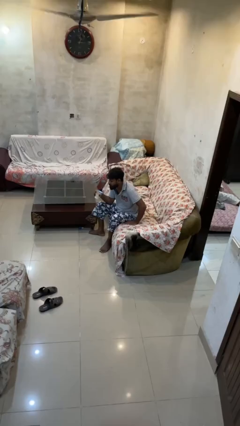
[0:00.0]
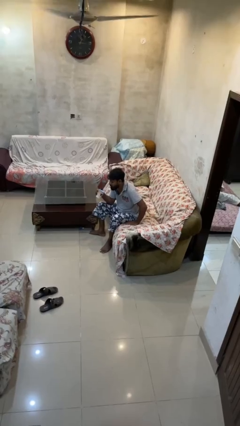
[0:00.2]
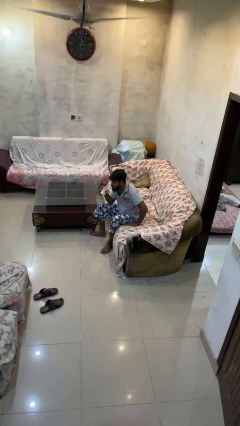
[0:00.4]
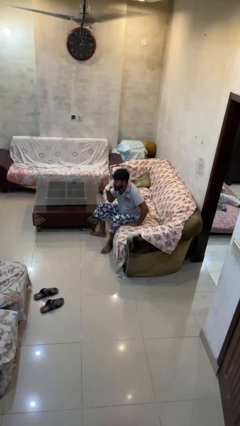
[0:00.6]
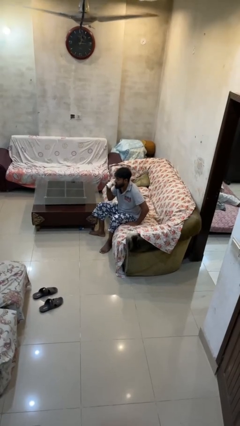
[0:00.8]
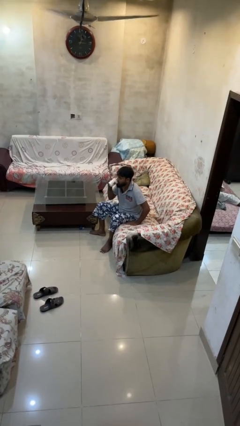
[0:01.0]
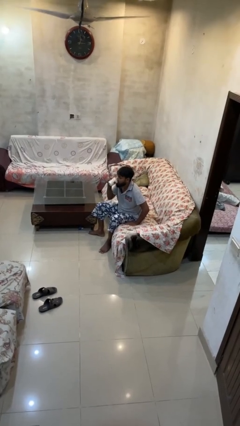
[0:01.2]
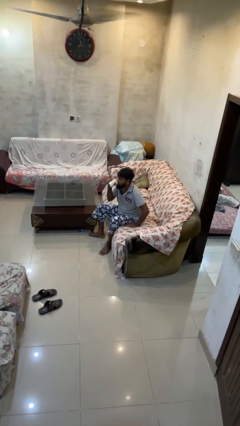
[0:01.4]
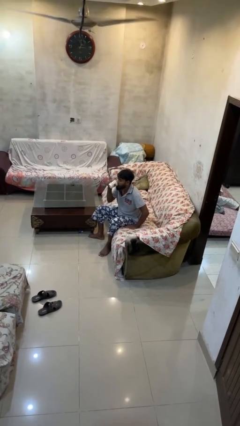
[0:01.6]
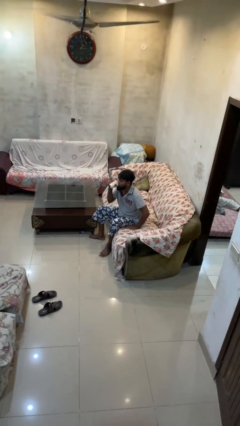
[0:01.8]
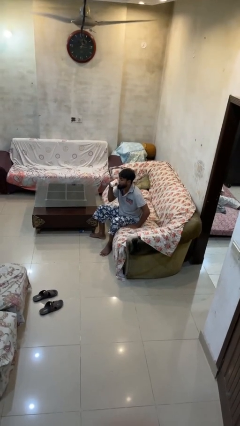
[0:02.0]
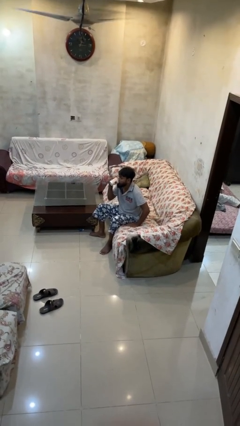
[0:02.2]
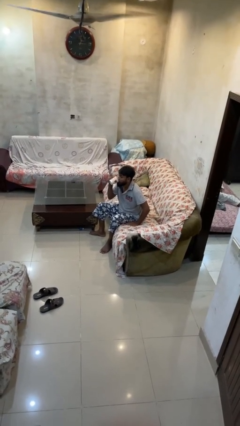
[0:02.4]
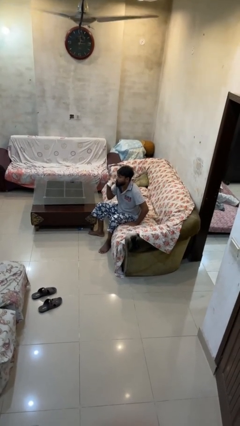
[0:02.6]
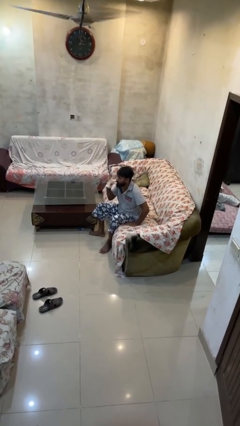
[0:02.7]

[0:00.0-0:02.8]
person drinks from mug

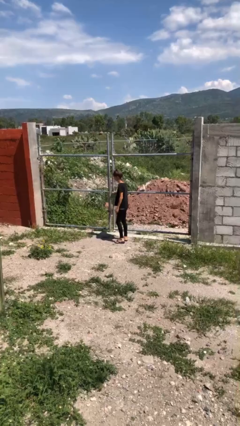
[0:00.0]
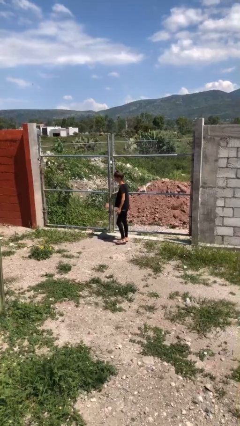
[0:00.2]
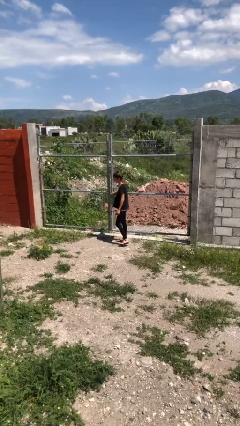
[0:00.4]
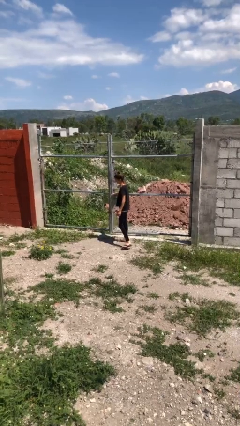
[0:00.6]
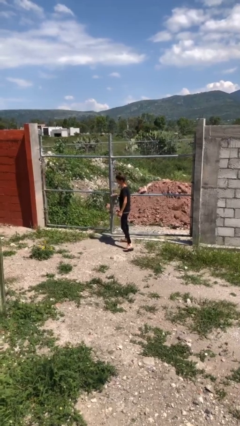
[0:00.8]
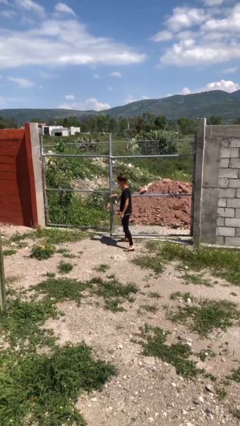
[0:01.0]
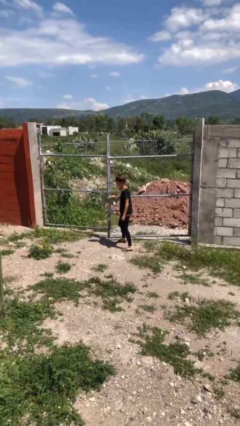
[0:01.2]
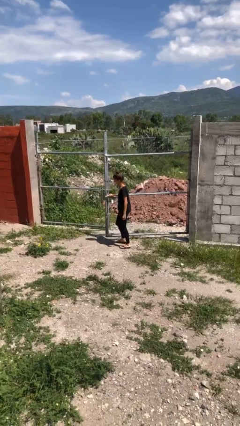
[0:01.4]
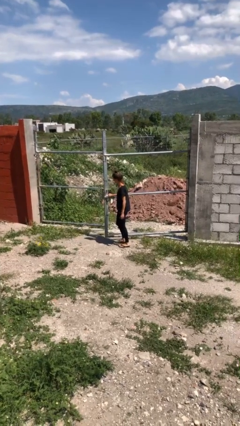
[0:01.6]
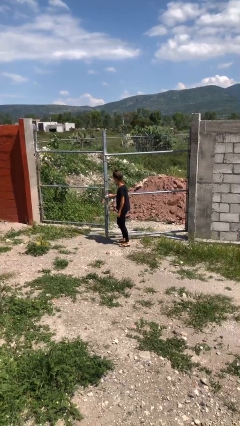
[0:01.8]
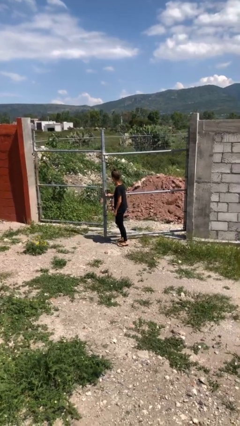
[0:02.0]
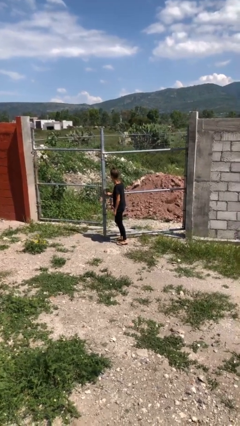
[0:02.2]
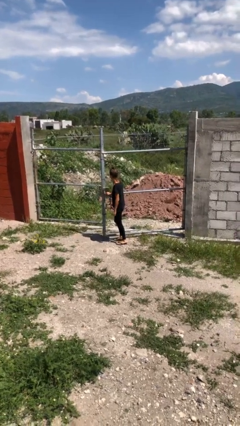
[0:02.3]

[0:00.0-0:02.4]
person opens gate

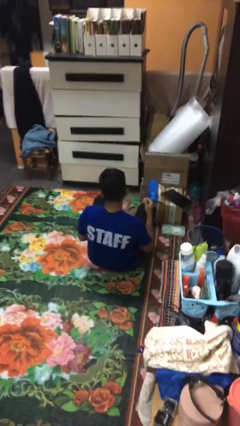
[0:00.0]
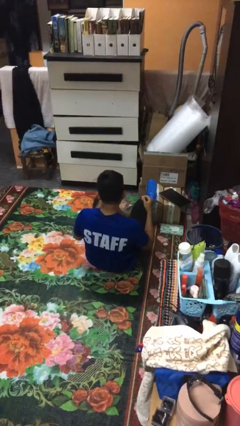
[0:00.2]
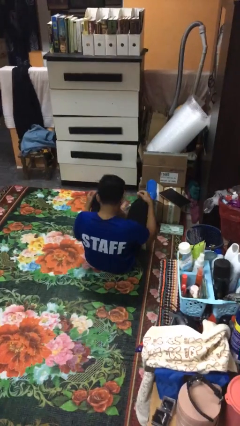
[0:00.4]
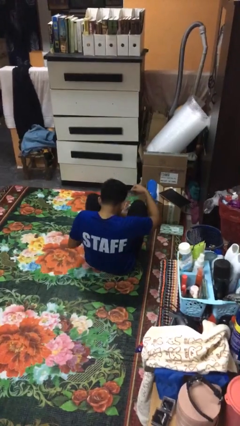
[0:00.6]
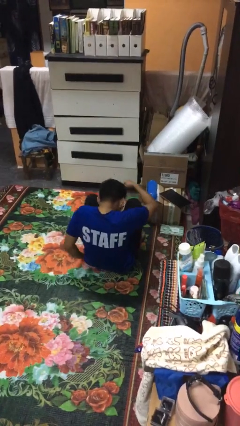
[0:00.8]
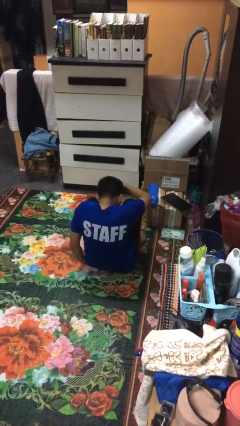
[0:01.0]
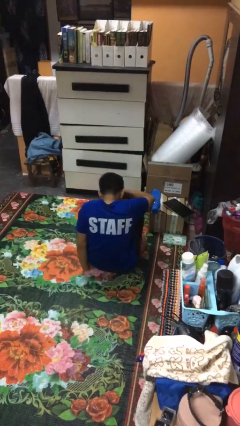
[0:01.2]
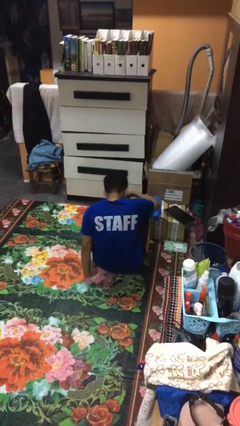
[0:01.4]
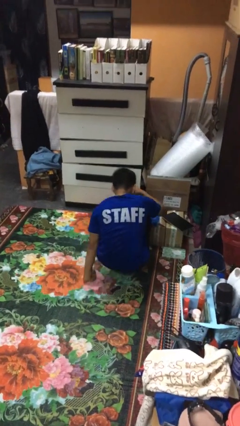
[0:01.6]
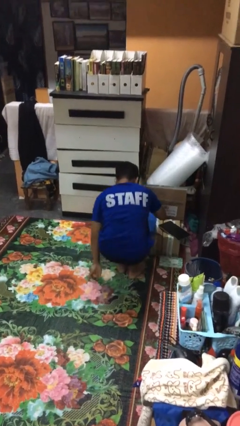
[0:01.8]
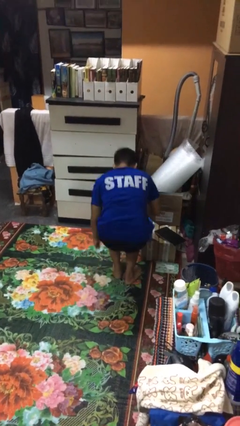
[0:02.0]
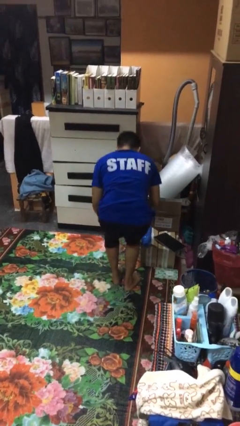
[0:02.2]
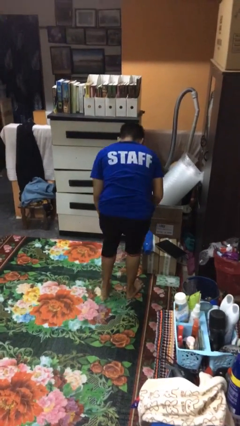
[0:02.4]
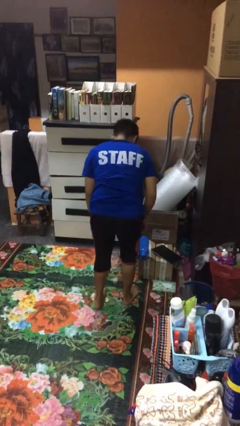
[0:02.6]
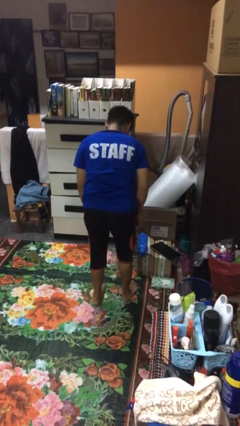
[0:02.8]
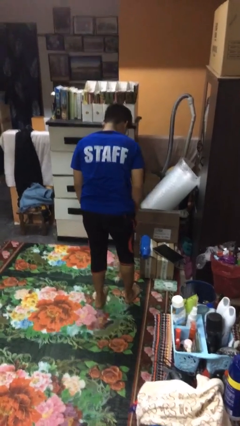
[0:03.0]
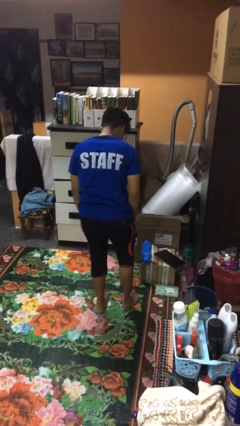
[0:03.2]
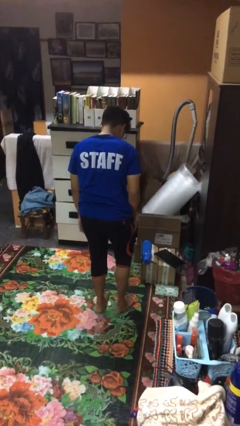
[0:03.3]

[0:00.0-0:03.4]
person stands up from floor

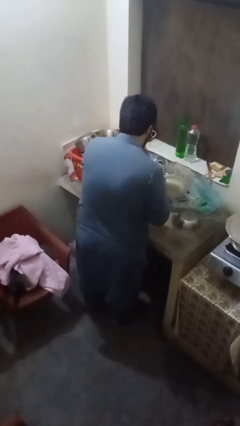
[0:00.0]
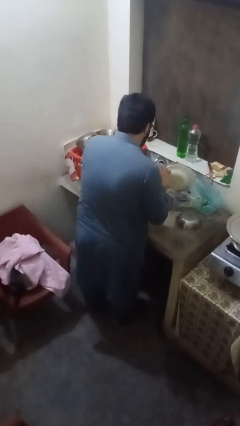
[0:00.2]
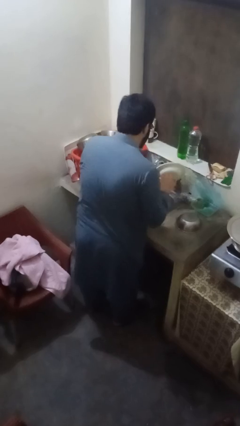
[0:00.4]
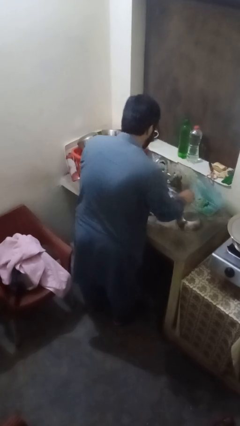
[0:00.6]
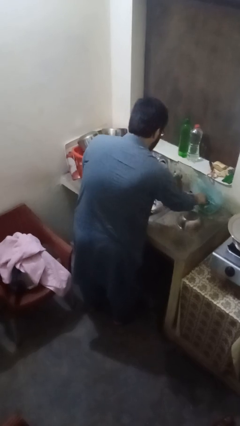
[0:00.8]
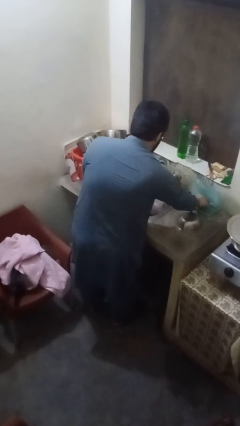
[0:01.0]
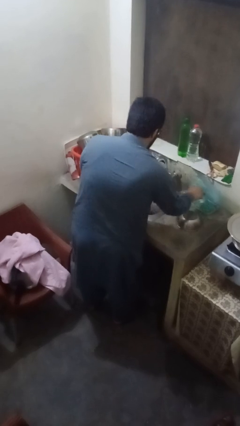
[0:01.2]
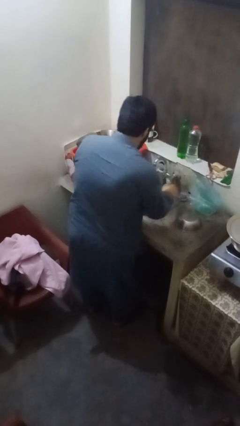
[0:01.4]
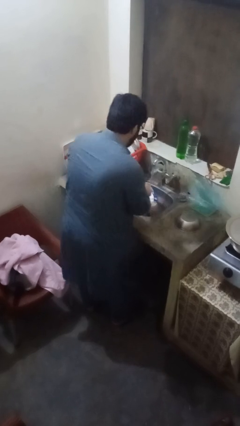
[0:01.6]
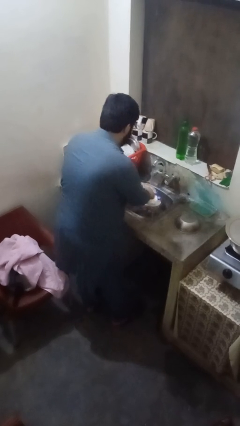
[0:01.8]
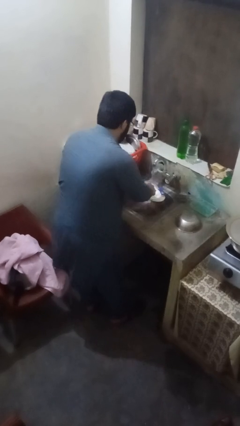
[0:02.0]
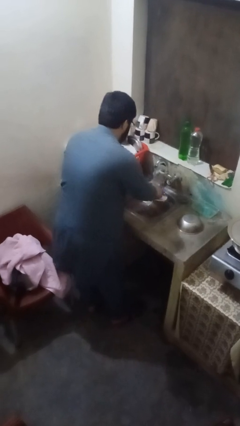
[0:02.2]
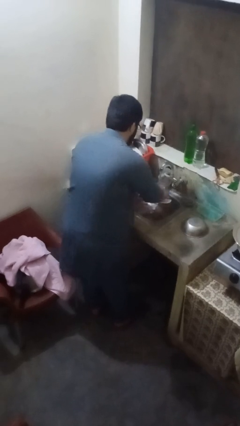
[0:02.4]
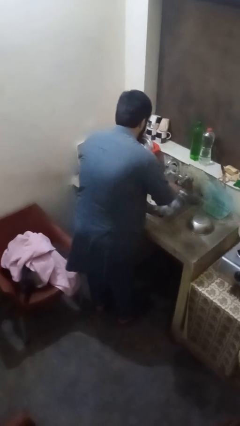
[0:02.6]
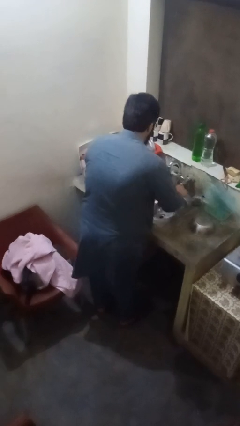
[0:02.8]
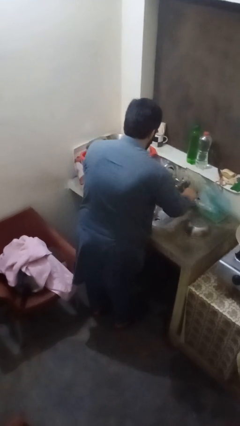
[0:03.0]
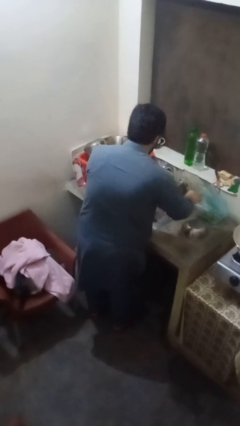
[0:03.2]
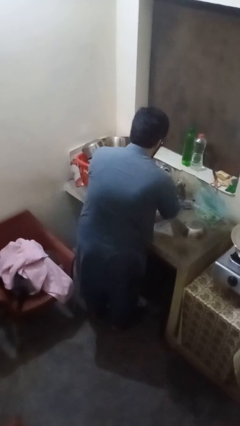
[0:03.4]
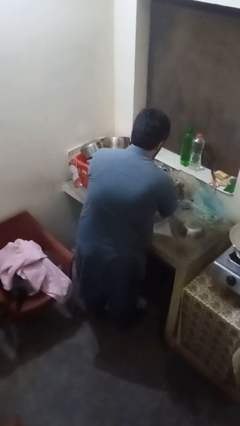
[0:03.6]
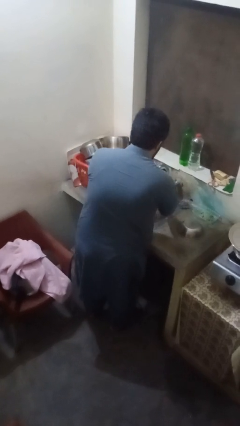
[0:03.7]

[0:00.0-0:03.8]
person washes dish

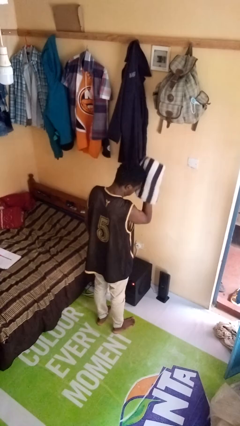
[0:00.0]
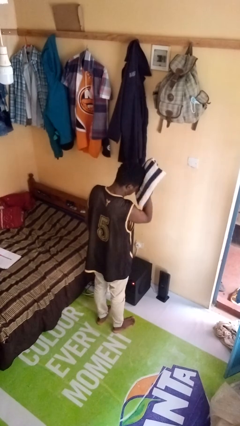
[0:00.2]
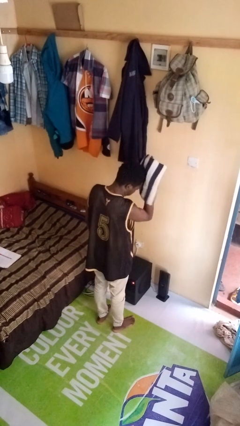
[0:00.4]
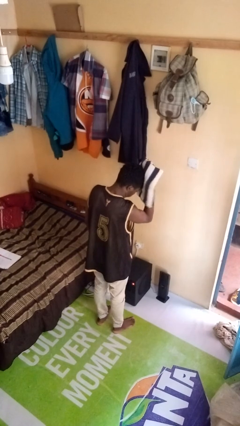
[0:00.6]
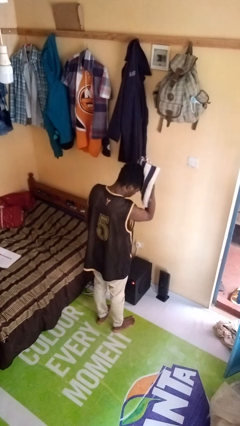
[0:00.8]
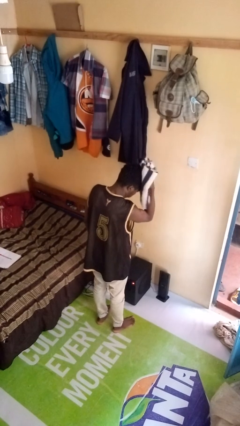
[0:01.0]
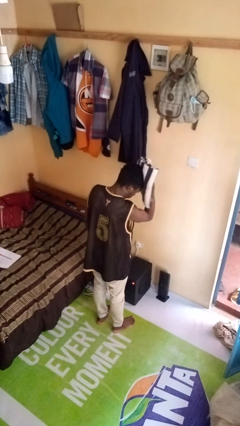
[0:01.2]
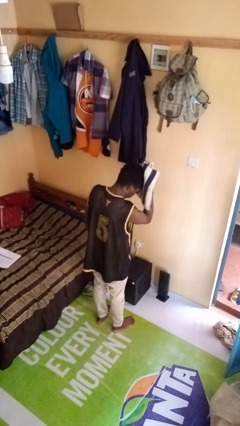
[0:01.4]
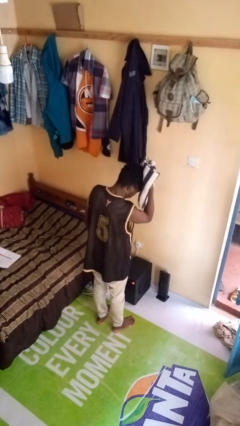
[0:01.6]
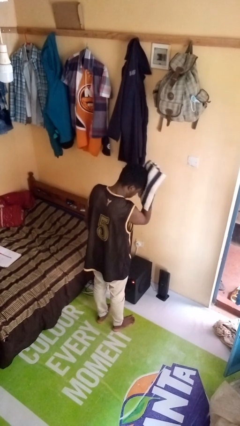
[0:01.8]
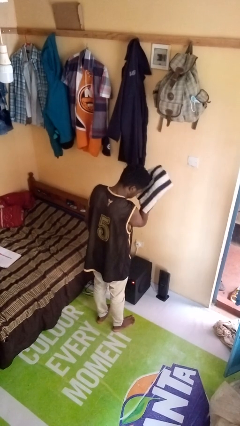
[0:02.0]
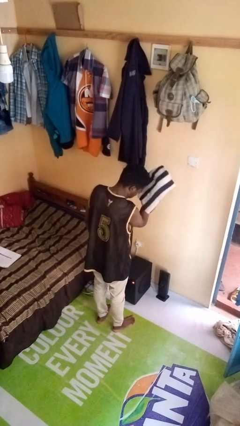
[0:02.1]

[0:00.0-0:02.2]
person dries hair with towel

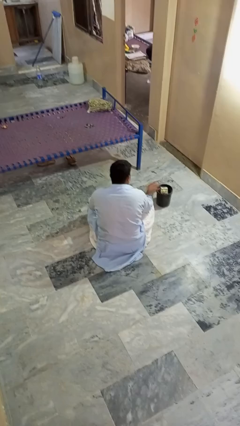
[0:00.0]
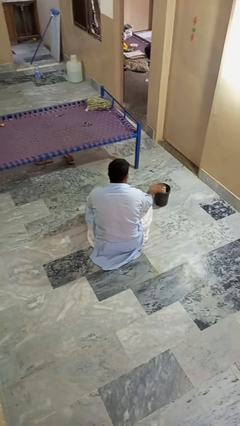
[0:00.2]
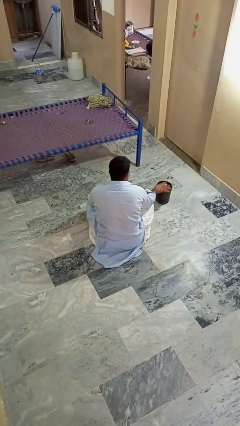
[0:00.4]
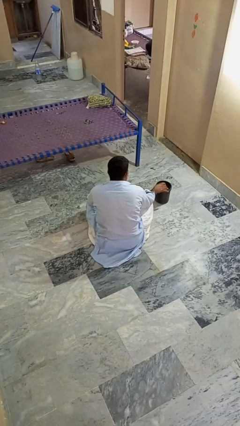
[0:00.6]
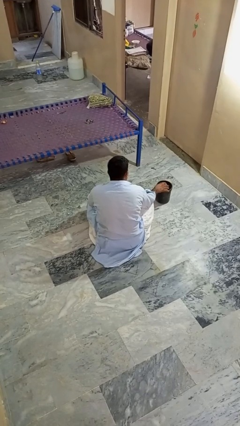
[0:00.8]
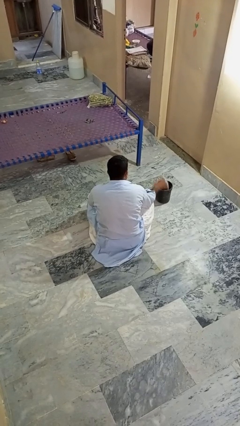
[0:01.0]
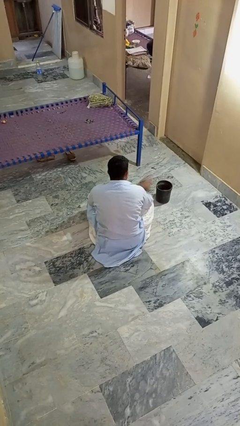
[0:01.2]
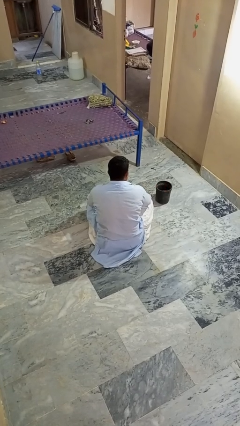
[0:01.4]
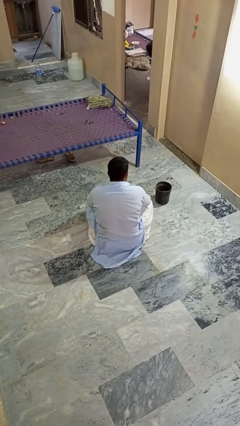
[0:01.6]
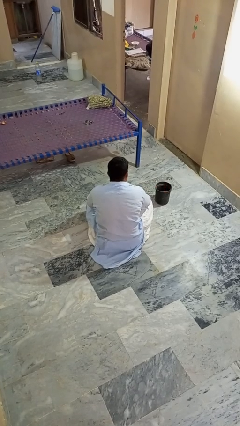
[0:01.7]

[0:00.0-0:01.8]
person takes object from basket

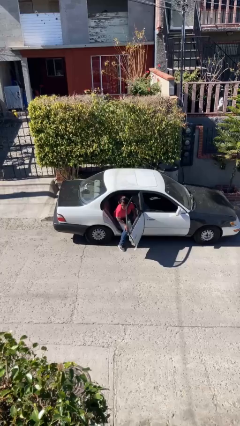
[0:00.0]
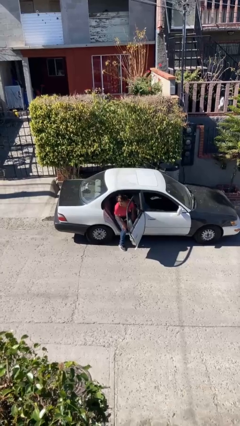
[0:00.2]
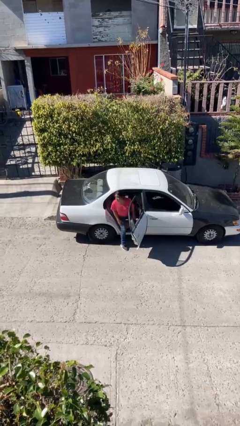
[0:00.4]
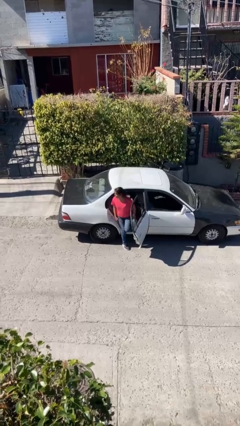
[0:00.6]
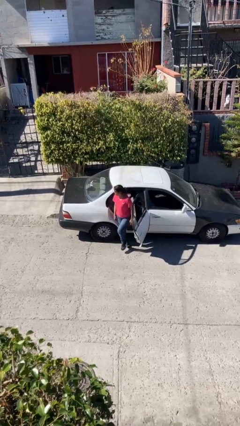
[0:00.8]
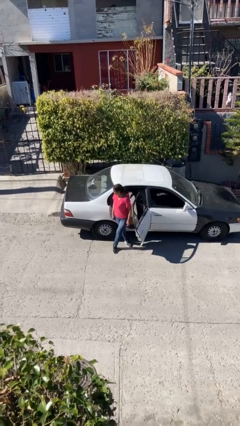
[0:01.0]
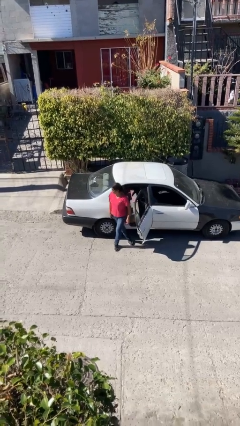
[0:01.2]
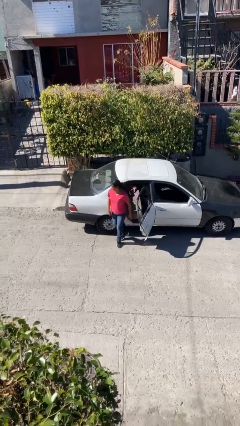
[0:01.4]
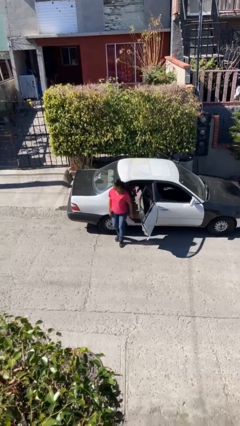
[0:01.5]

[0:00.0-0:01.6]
person exits car
